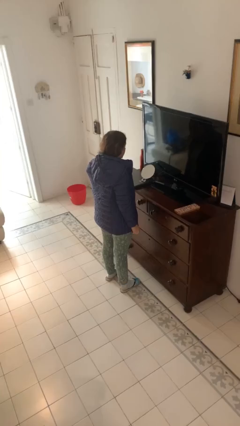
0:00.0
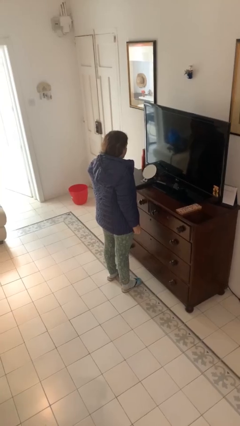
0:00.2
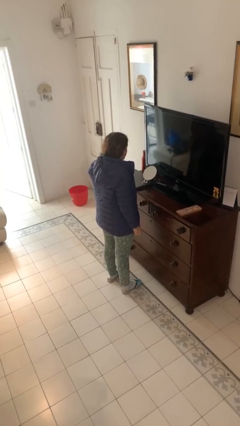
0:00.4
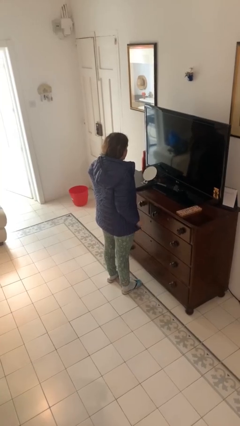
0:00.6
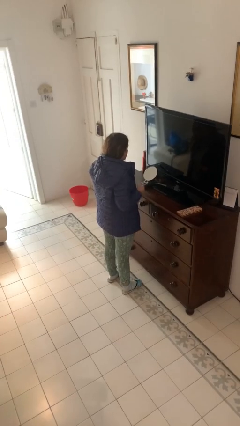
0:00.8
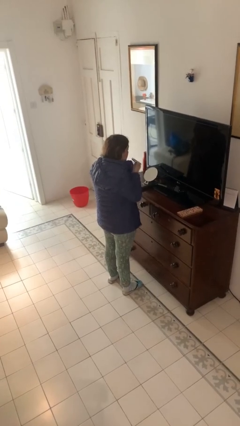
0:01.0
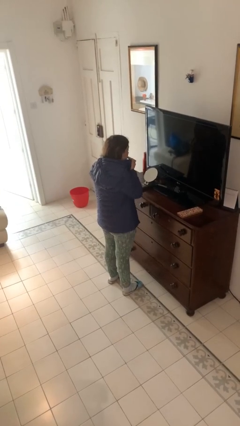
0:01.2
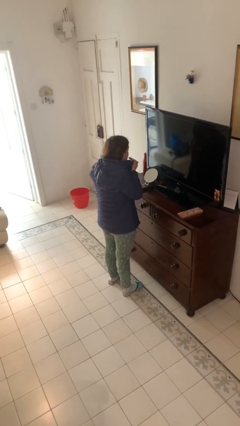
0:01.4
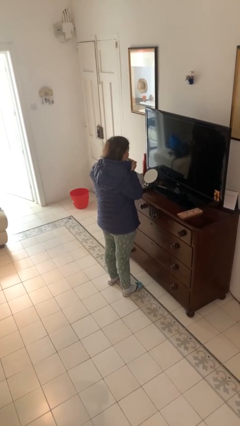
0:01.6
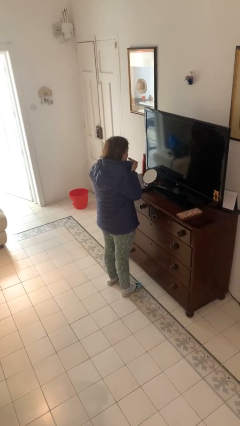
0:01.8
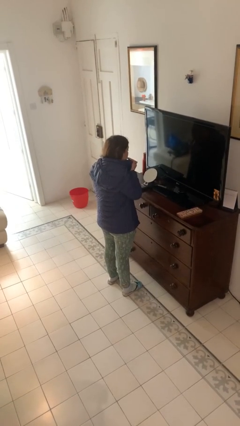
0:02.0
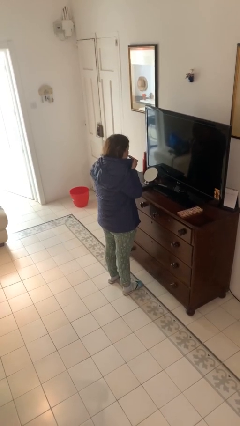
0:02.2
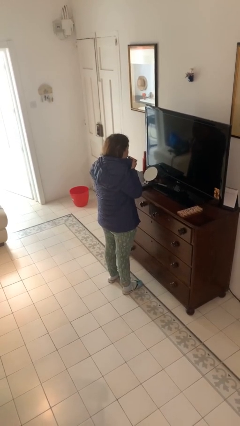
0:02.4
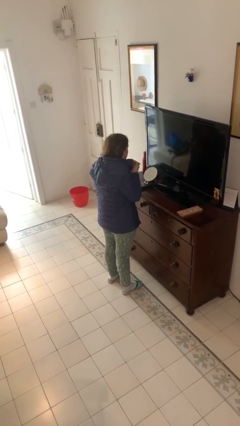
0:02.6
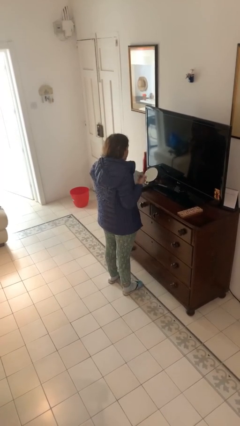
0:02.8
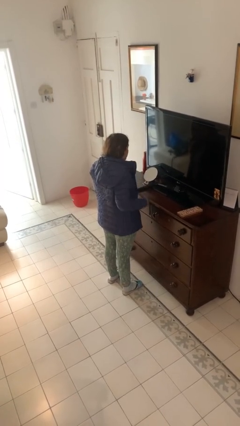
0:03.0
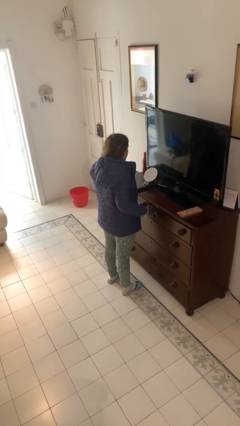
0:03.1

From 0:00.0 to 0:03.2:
person applies lip makeup

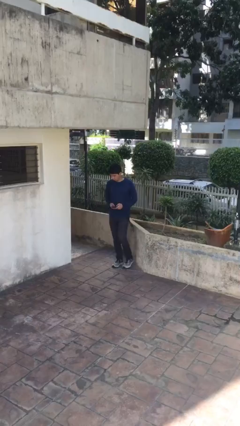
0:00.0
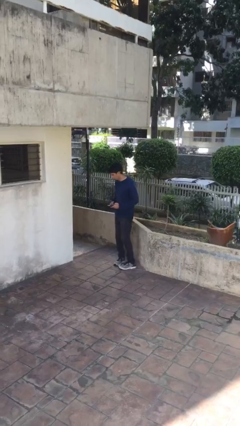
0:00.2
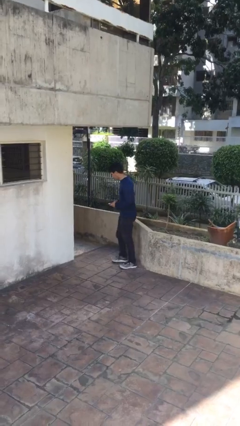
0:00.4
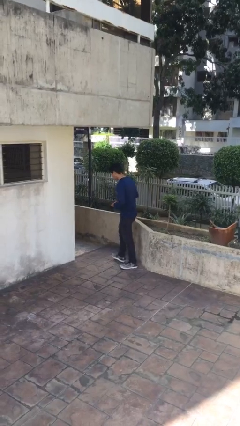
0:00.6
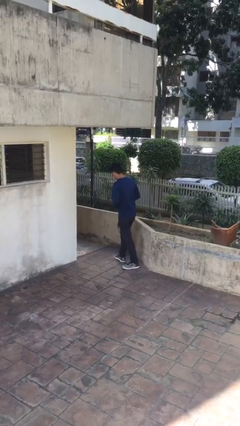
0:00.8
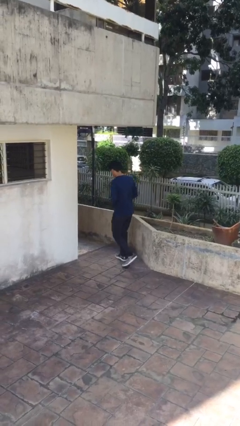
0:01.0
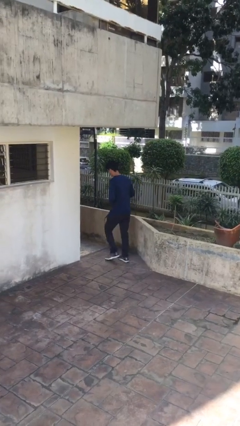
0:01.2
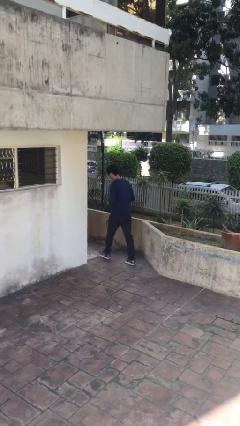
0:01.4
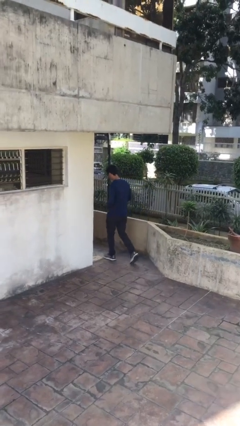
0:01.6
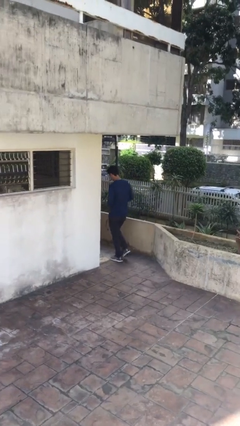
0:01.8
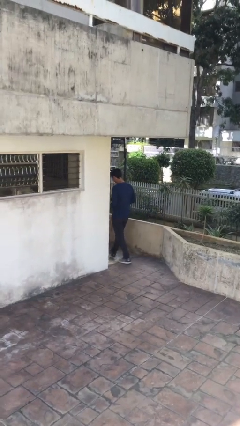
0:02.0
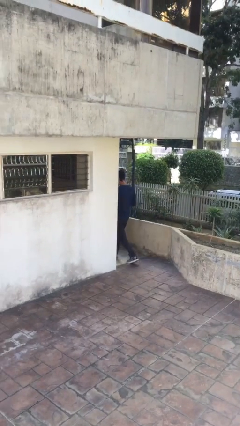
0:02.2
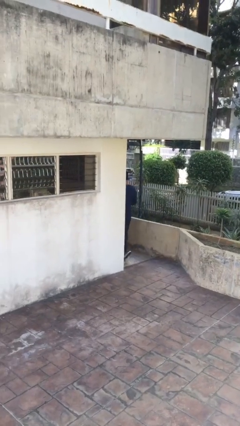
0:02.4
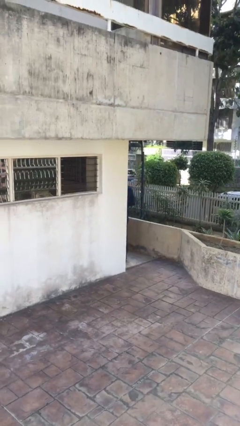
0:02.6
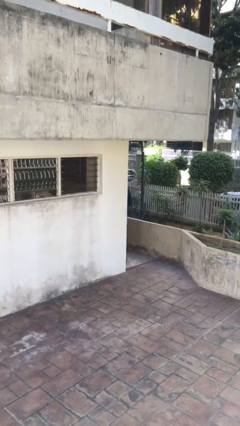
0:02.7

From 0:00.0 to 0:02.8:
person exits scene through structure

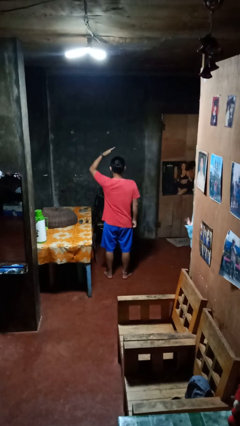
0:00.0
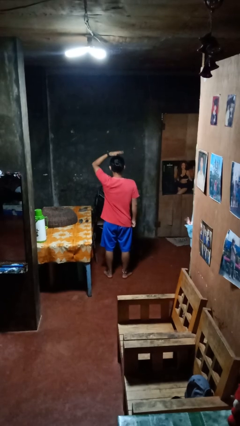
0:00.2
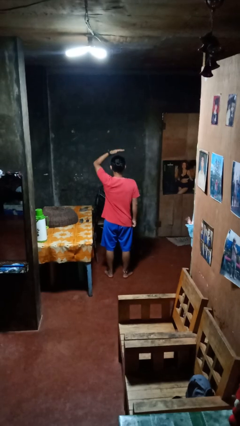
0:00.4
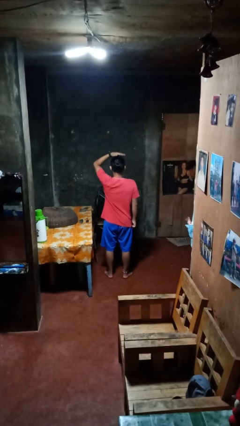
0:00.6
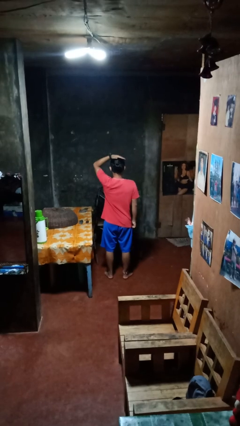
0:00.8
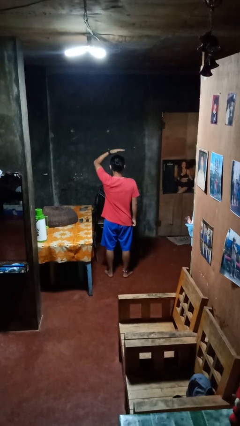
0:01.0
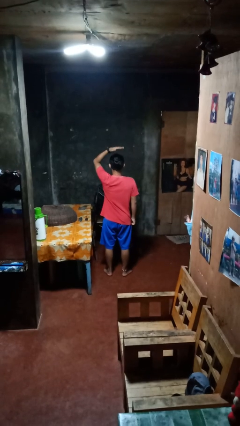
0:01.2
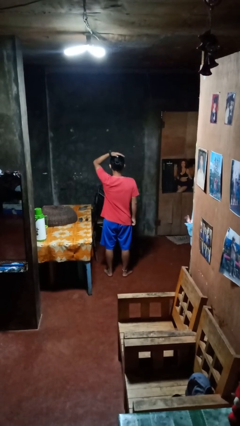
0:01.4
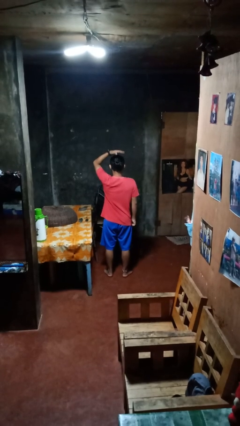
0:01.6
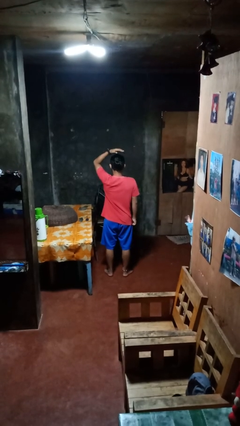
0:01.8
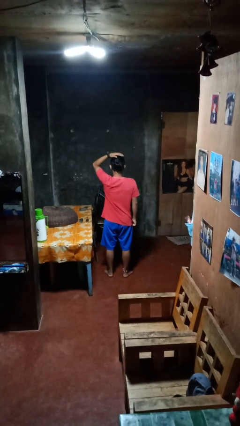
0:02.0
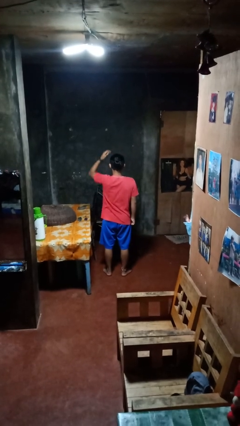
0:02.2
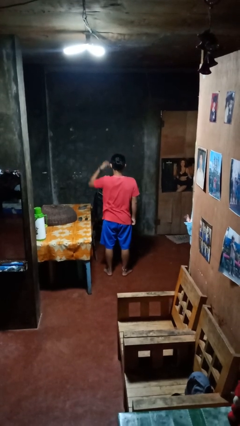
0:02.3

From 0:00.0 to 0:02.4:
person pats head

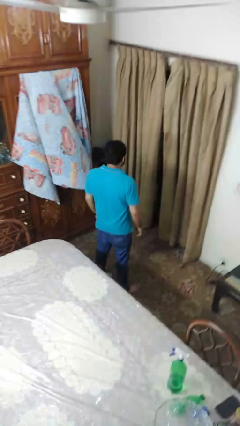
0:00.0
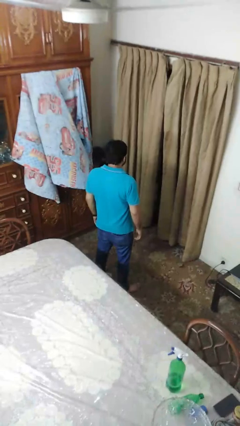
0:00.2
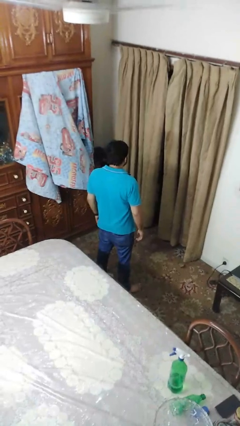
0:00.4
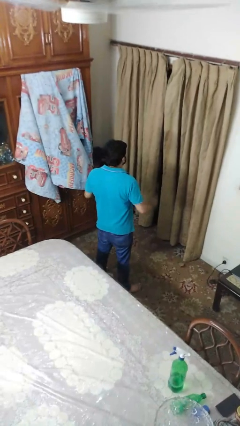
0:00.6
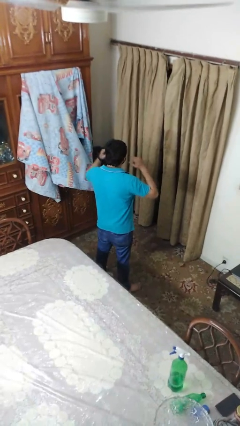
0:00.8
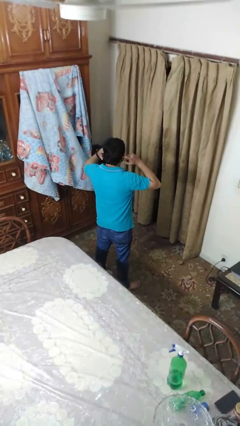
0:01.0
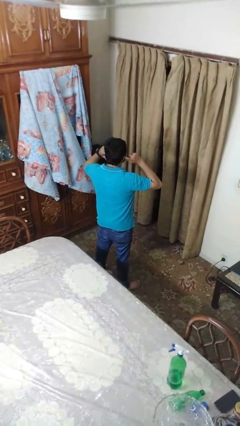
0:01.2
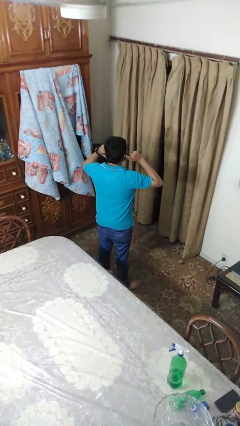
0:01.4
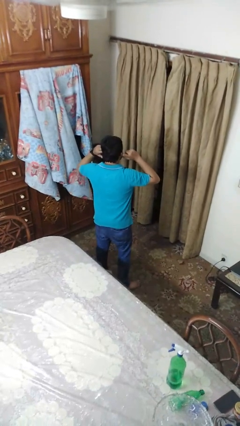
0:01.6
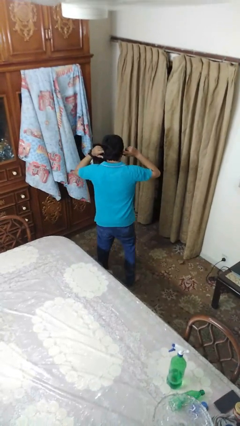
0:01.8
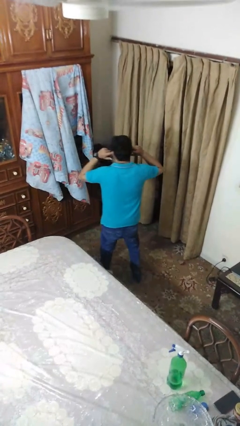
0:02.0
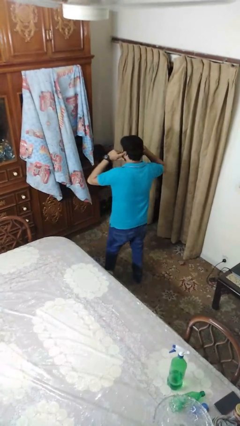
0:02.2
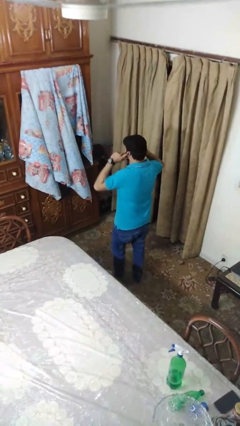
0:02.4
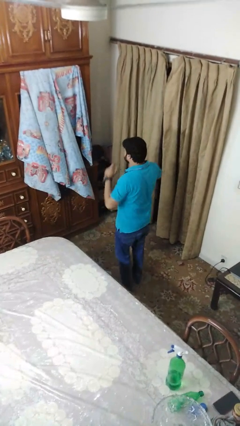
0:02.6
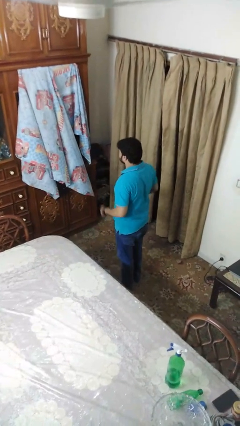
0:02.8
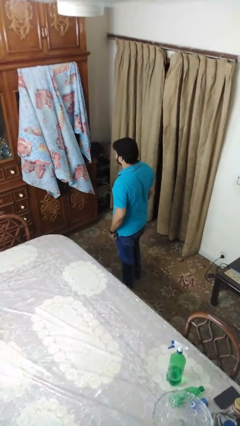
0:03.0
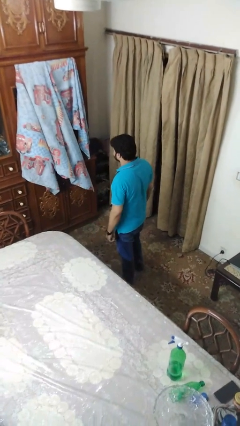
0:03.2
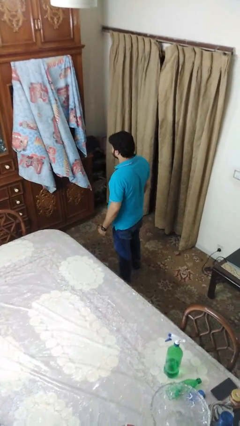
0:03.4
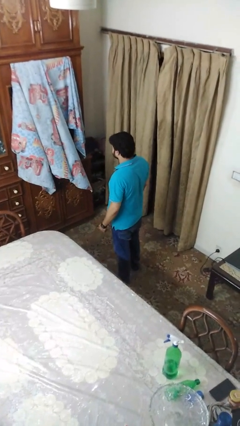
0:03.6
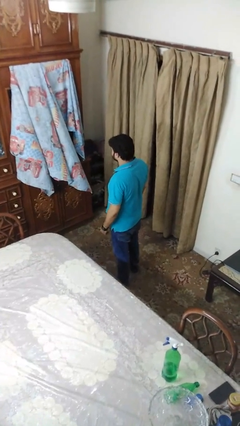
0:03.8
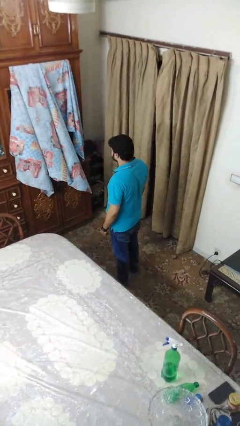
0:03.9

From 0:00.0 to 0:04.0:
person puts fingers in ear

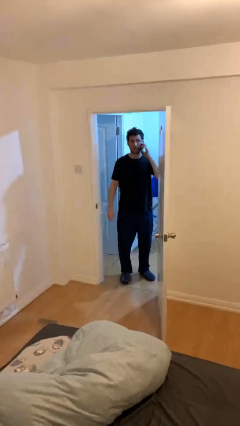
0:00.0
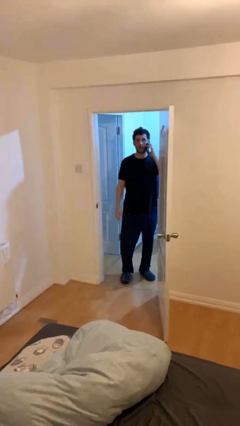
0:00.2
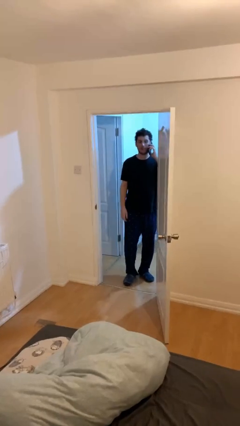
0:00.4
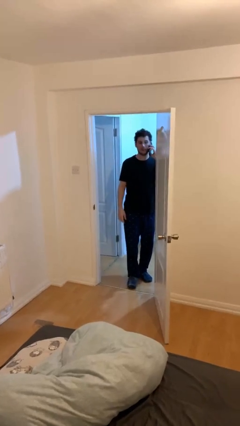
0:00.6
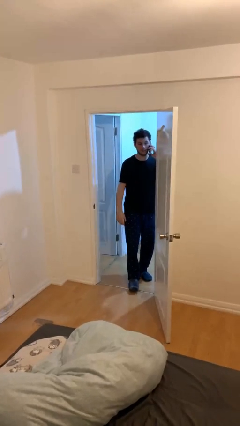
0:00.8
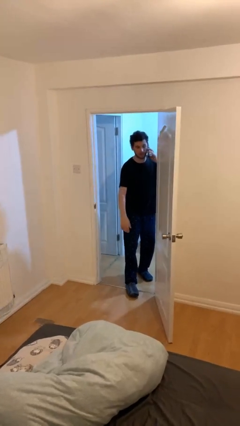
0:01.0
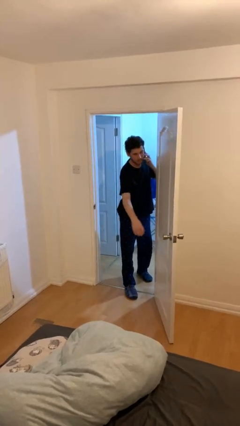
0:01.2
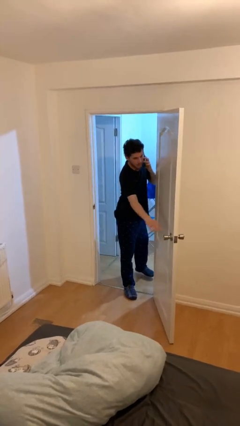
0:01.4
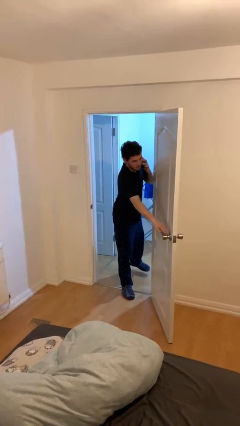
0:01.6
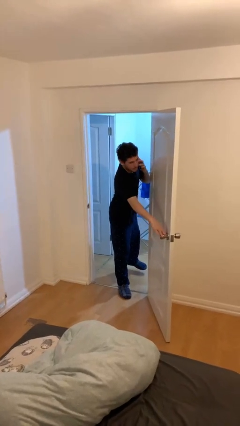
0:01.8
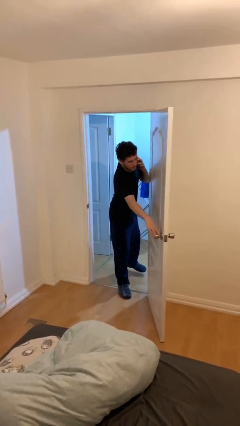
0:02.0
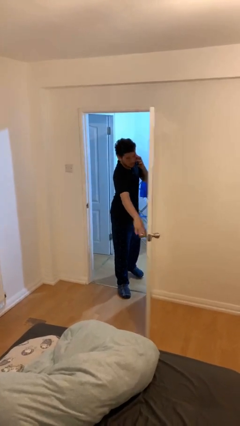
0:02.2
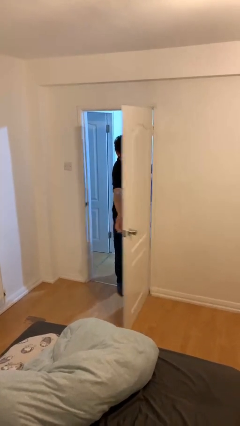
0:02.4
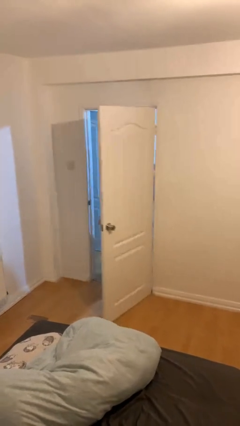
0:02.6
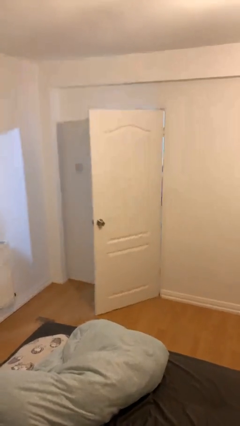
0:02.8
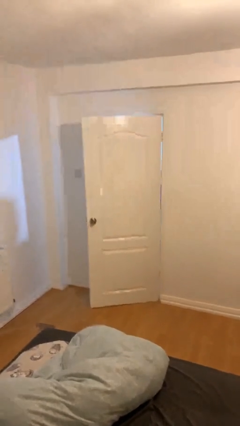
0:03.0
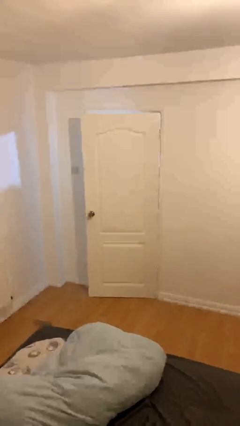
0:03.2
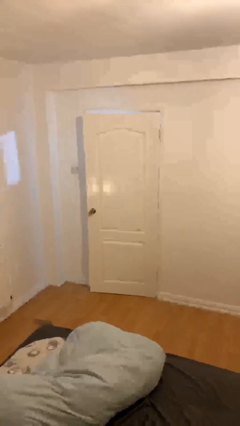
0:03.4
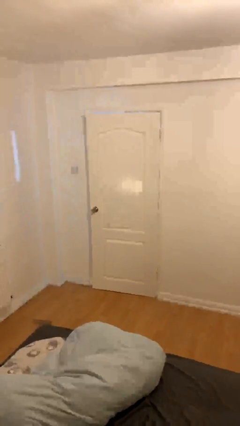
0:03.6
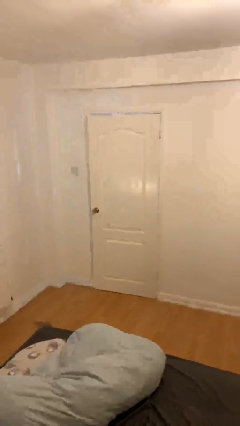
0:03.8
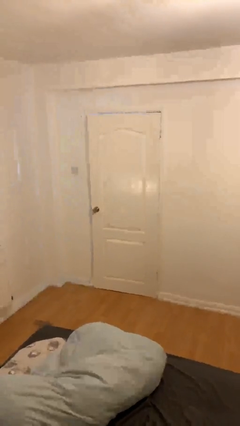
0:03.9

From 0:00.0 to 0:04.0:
person closes facility door

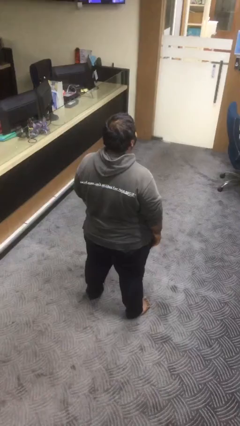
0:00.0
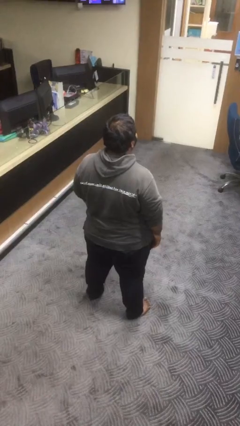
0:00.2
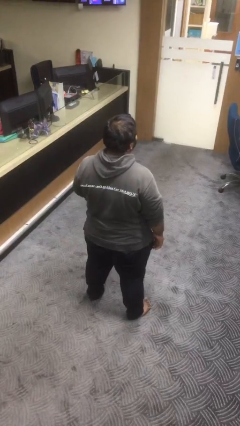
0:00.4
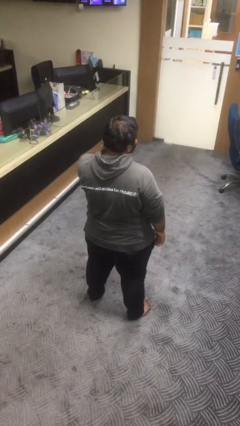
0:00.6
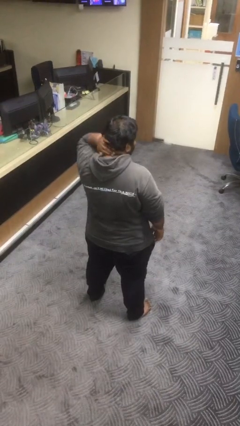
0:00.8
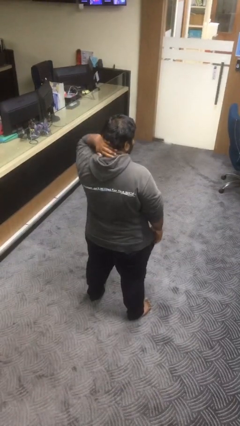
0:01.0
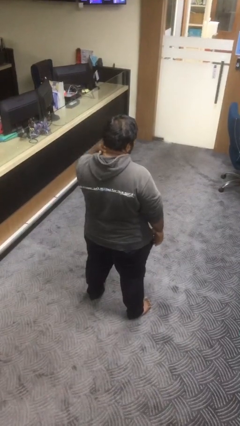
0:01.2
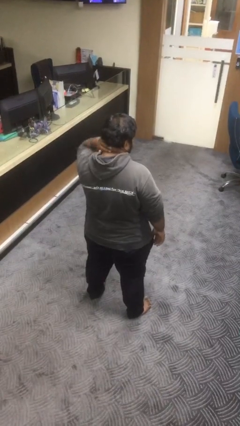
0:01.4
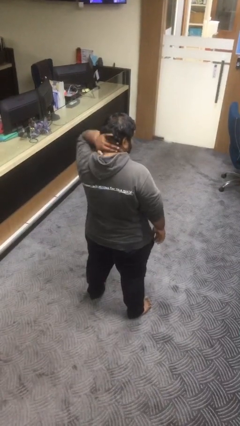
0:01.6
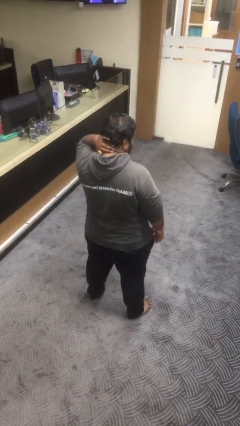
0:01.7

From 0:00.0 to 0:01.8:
person rubs neck
